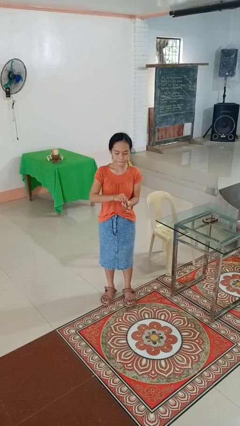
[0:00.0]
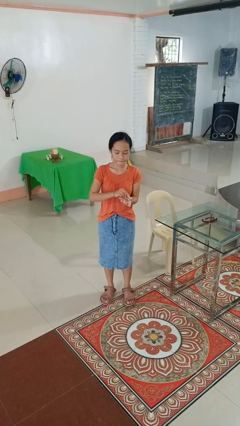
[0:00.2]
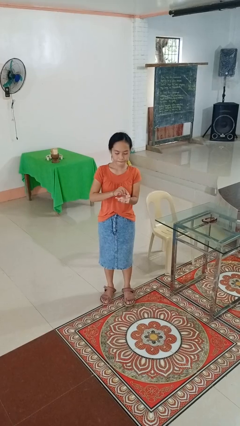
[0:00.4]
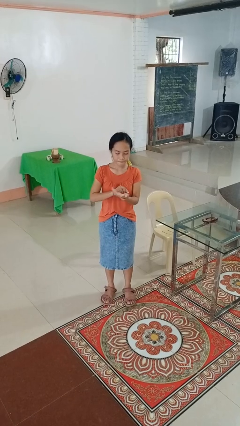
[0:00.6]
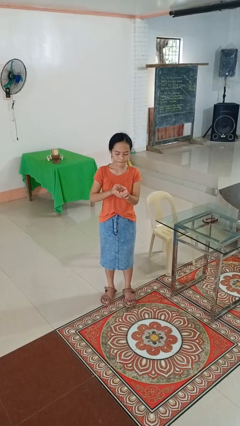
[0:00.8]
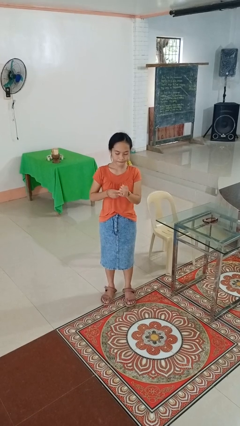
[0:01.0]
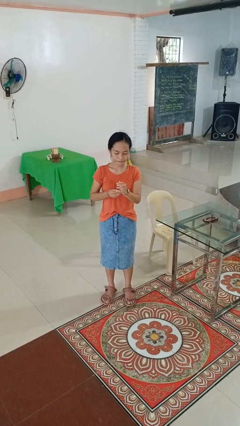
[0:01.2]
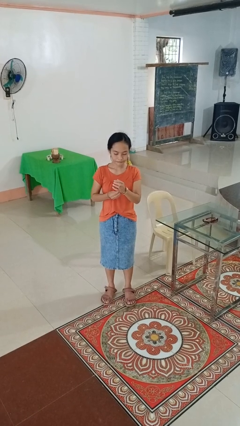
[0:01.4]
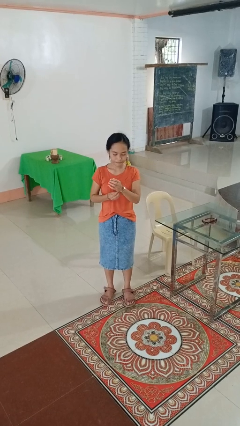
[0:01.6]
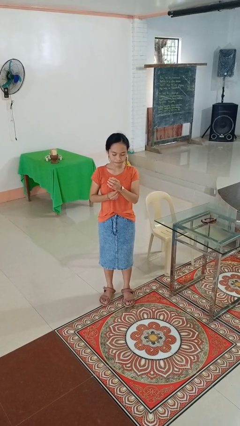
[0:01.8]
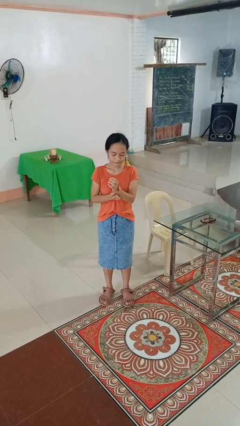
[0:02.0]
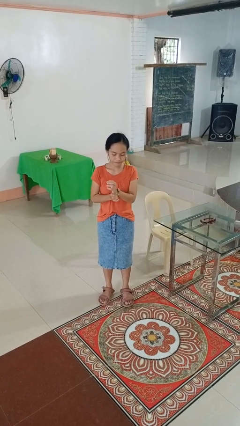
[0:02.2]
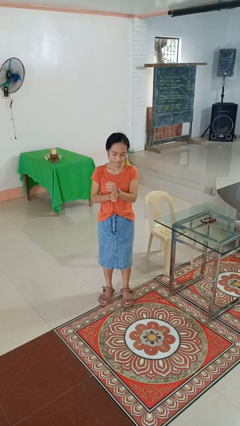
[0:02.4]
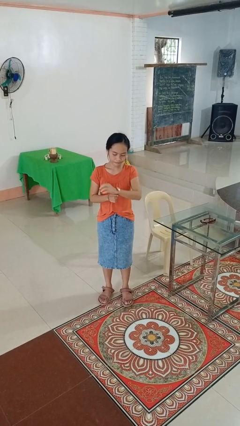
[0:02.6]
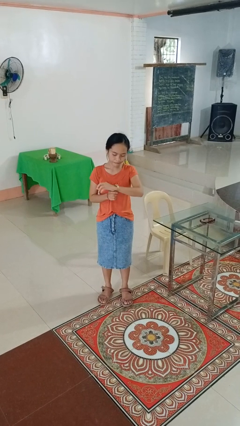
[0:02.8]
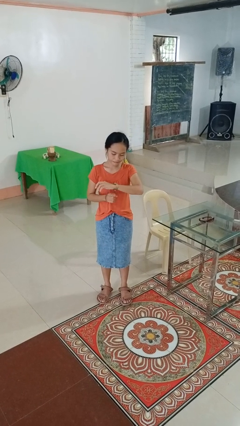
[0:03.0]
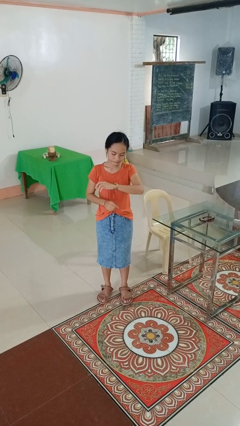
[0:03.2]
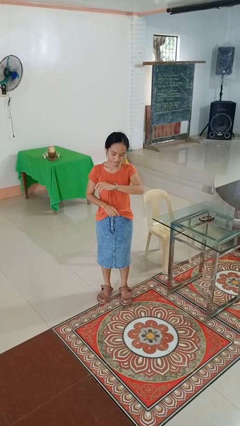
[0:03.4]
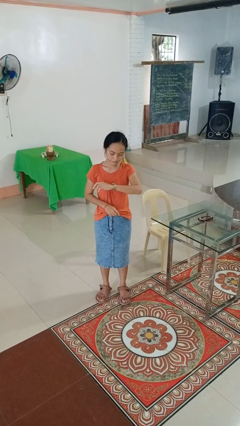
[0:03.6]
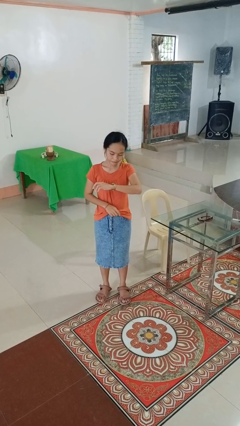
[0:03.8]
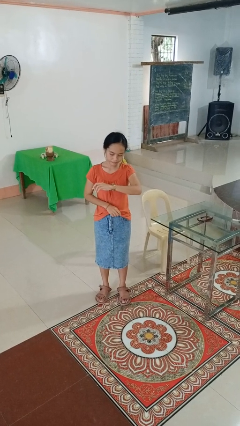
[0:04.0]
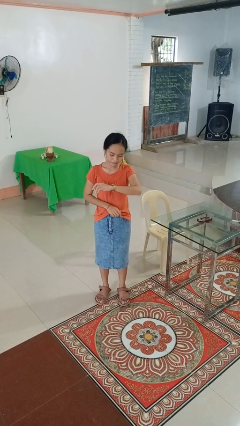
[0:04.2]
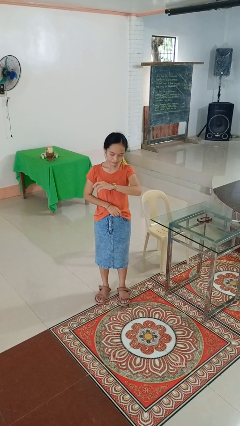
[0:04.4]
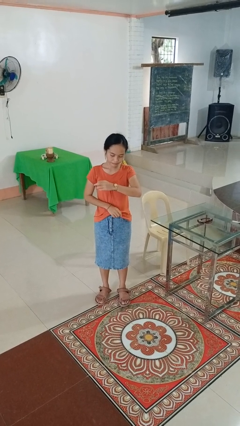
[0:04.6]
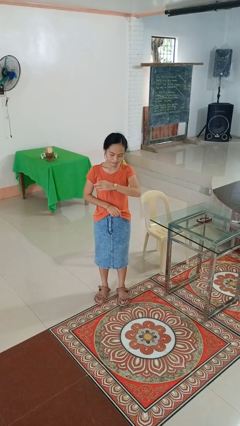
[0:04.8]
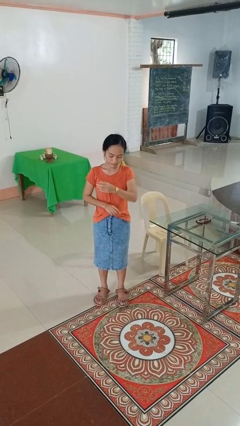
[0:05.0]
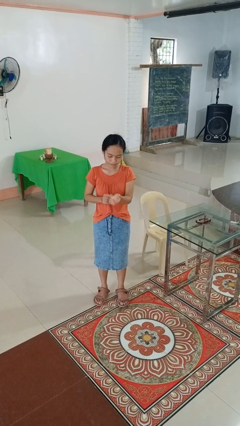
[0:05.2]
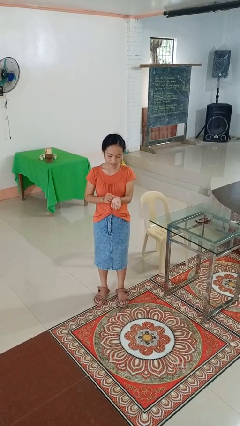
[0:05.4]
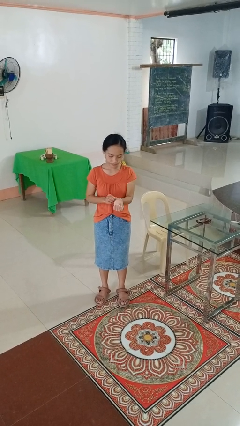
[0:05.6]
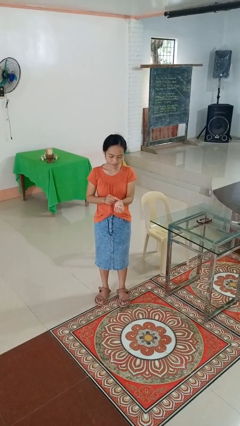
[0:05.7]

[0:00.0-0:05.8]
person puts on wristwatch

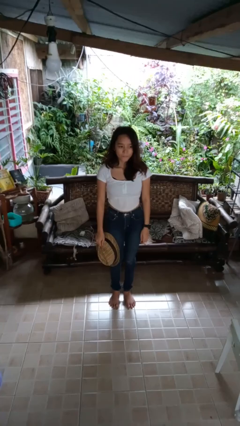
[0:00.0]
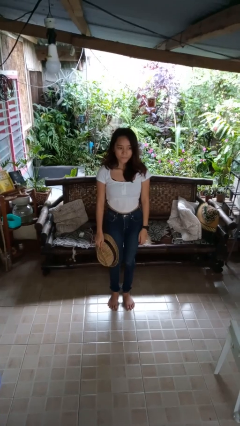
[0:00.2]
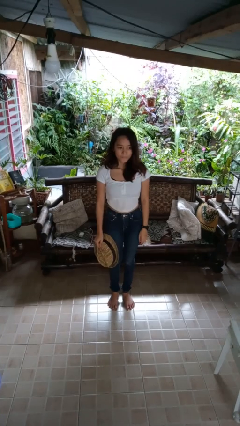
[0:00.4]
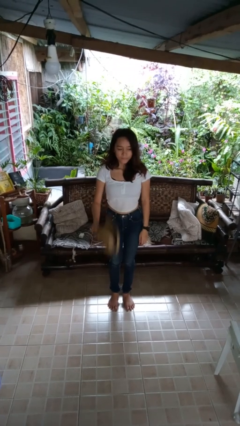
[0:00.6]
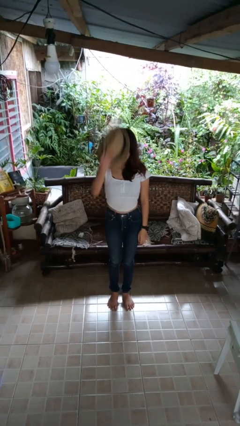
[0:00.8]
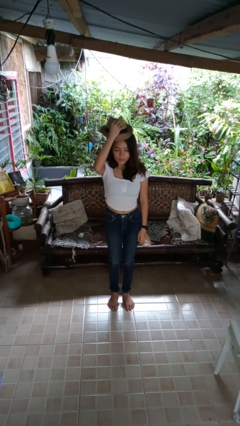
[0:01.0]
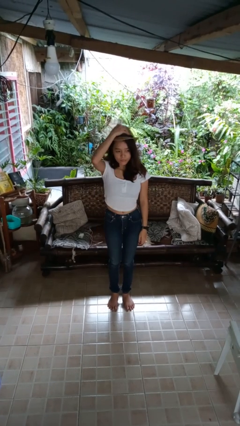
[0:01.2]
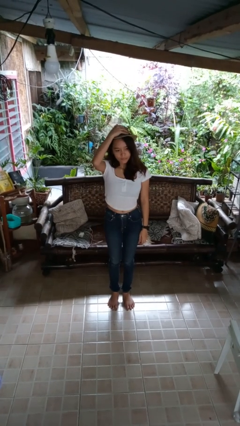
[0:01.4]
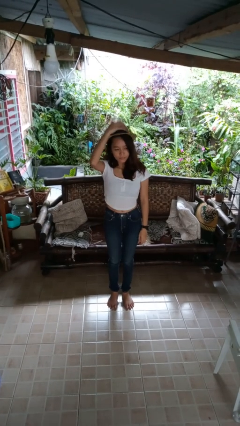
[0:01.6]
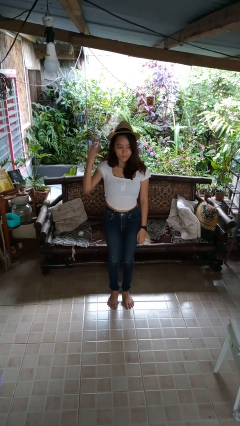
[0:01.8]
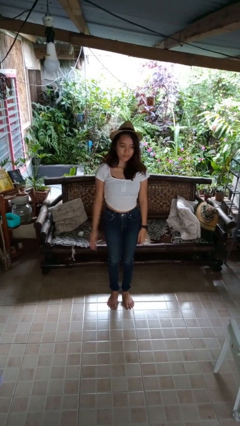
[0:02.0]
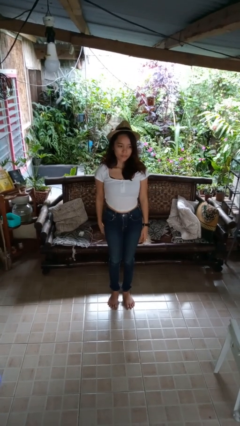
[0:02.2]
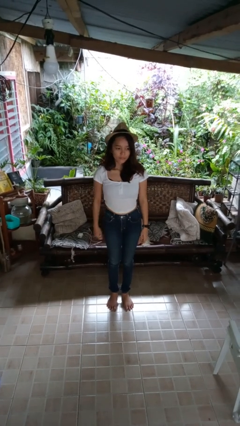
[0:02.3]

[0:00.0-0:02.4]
person puts on hat

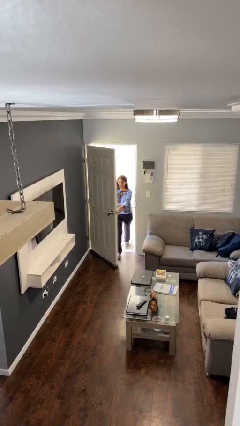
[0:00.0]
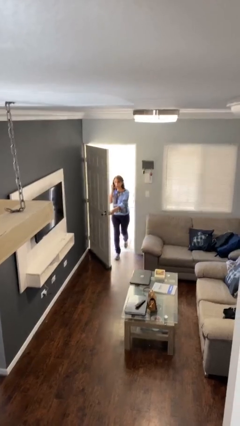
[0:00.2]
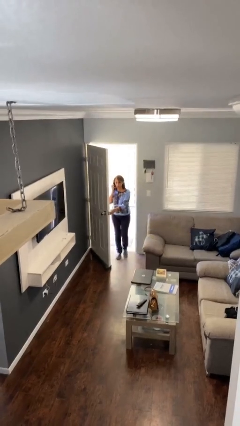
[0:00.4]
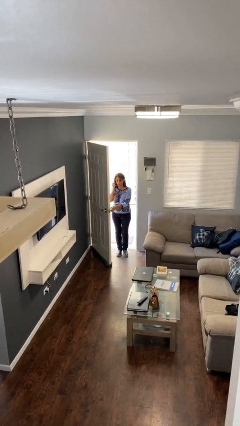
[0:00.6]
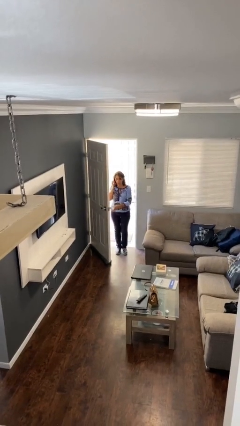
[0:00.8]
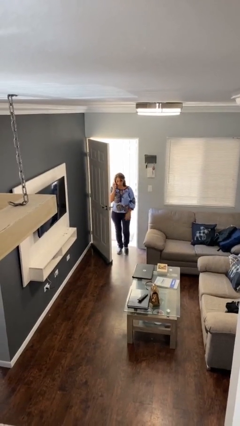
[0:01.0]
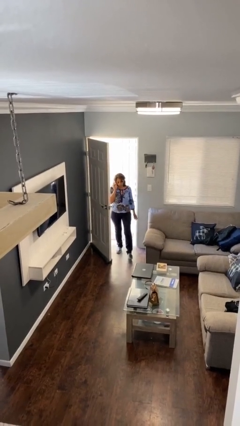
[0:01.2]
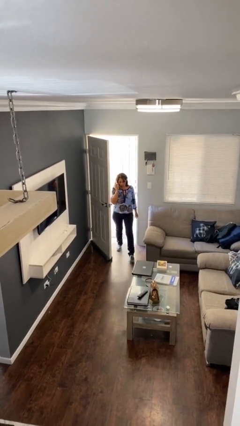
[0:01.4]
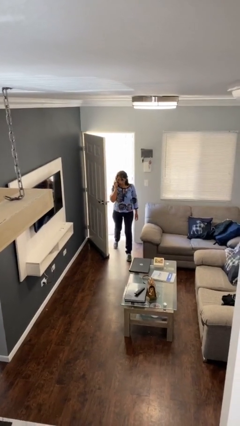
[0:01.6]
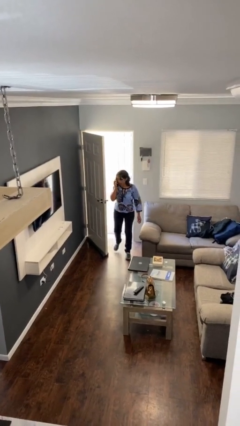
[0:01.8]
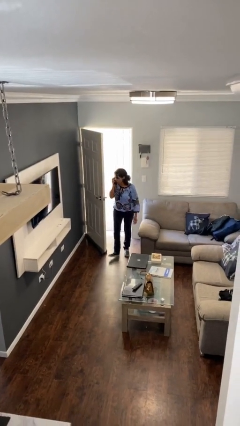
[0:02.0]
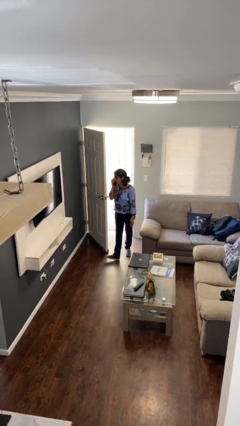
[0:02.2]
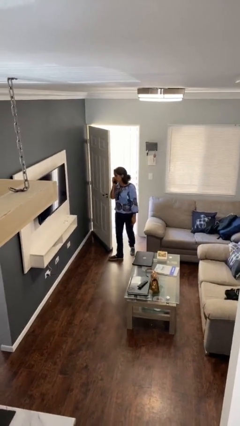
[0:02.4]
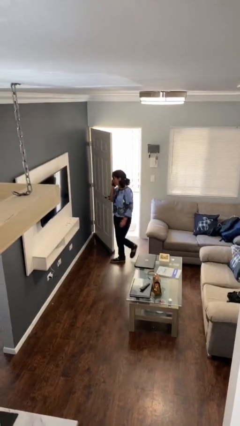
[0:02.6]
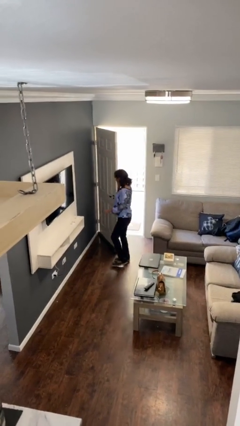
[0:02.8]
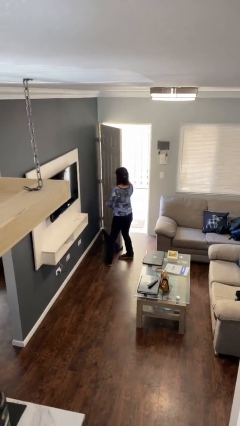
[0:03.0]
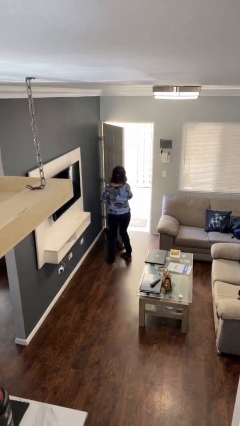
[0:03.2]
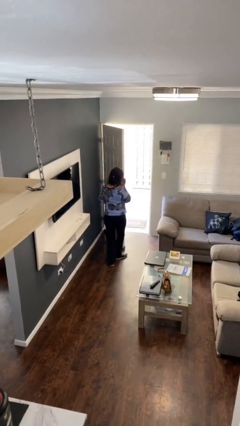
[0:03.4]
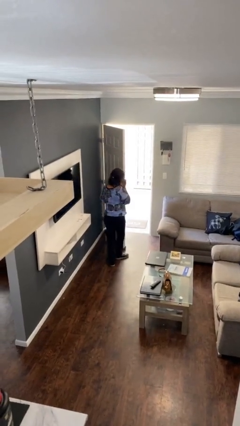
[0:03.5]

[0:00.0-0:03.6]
person enters scene through structure

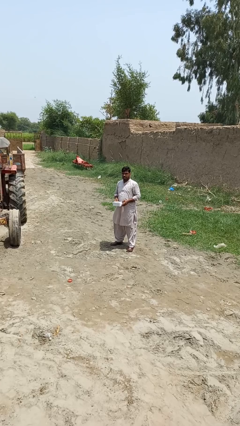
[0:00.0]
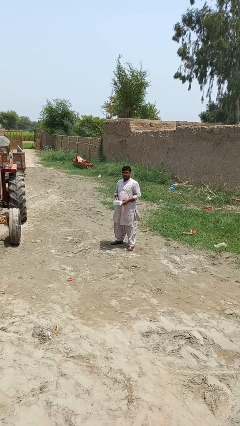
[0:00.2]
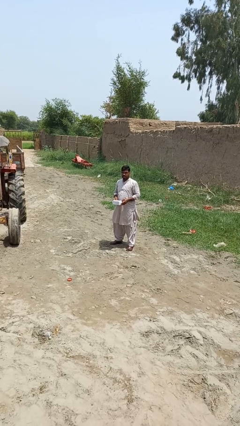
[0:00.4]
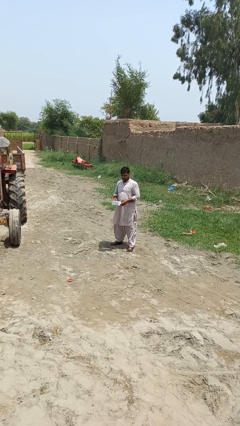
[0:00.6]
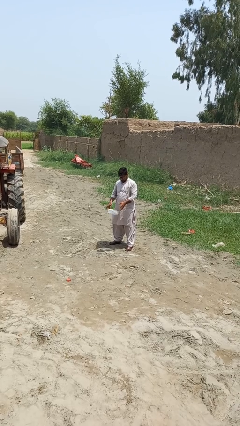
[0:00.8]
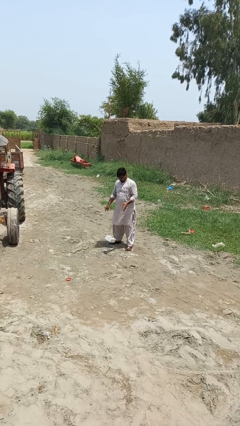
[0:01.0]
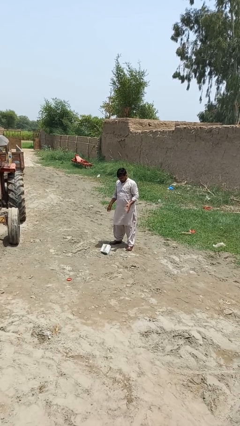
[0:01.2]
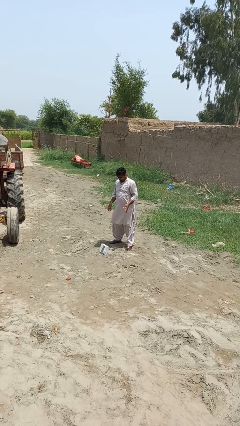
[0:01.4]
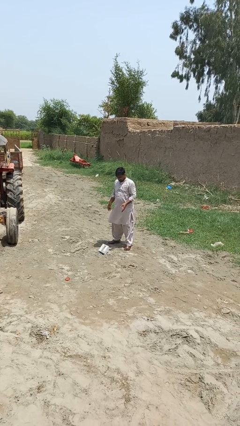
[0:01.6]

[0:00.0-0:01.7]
person drops object

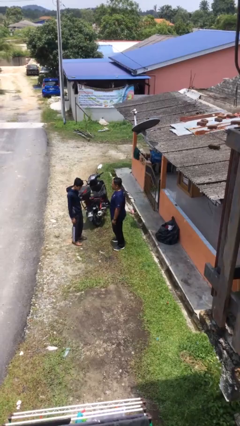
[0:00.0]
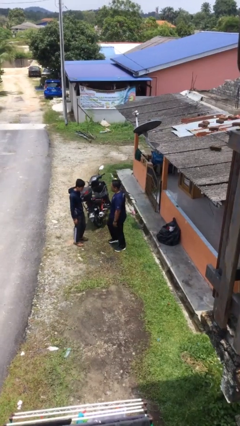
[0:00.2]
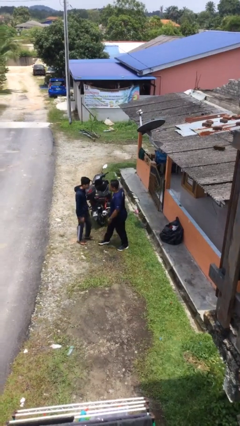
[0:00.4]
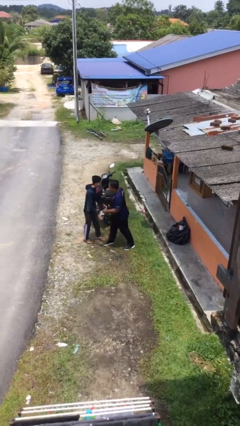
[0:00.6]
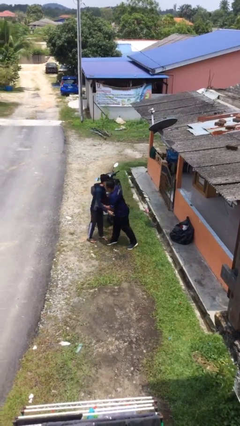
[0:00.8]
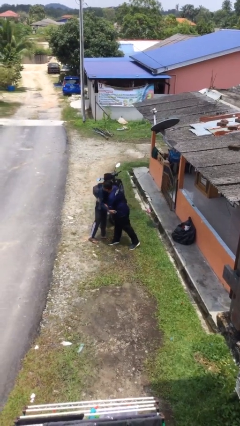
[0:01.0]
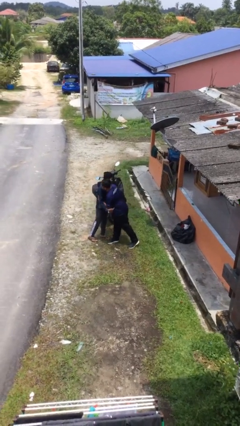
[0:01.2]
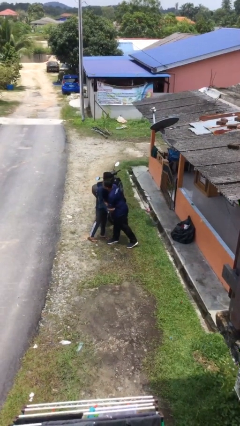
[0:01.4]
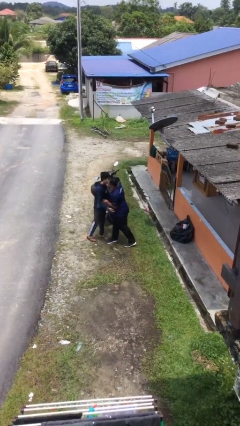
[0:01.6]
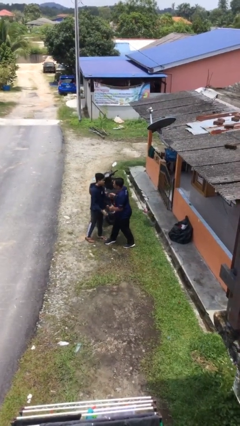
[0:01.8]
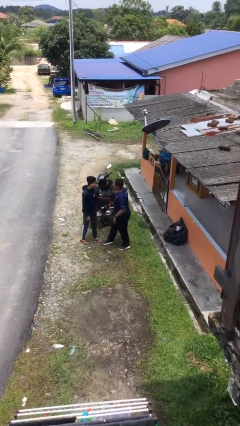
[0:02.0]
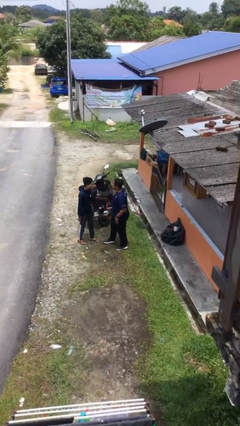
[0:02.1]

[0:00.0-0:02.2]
person embraces person

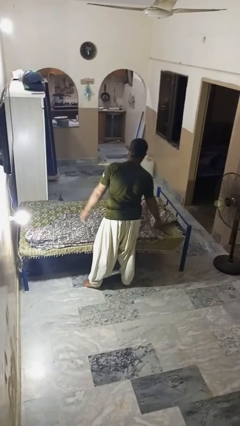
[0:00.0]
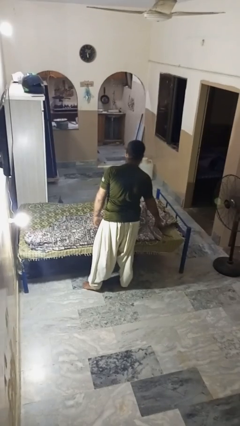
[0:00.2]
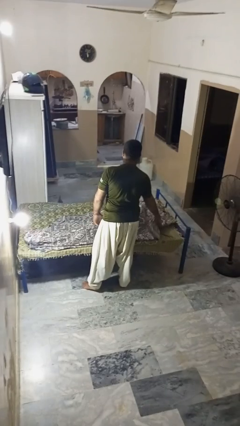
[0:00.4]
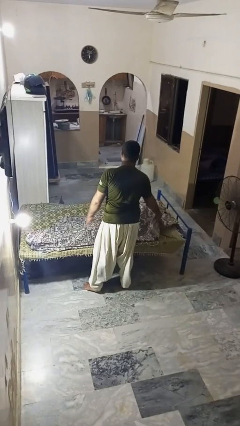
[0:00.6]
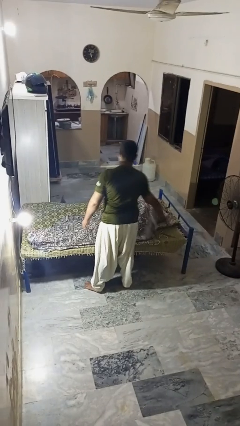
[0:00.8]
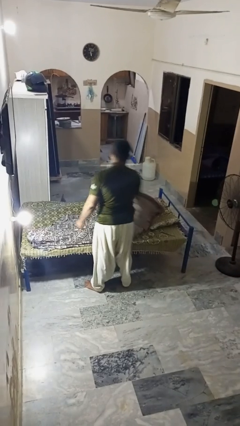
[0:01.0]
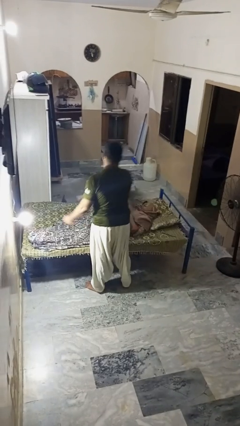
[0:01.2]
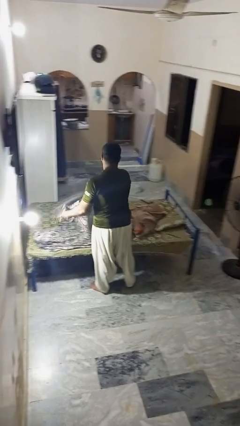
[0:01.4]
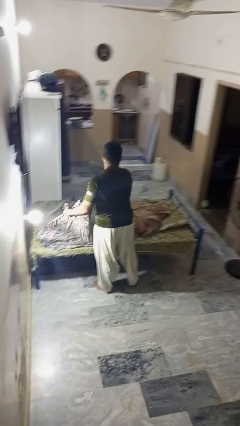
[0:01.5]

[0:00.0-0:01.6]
person uncovers friend with blanket
